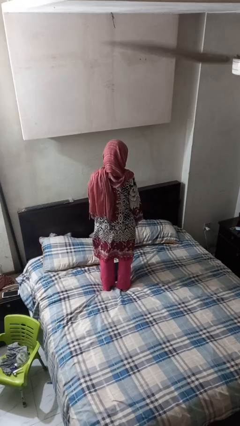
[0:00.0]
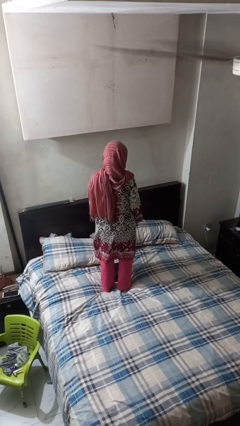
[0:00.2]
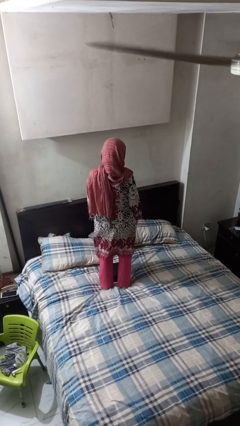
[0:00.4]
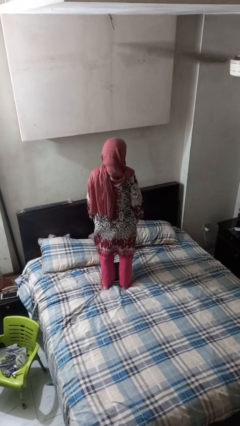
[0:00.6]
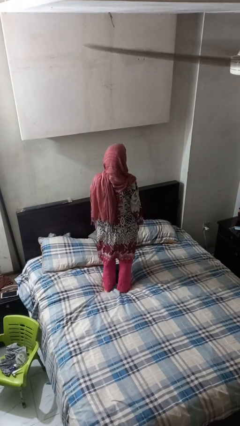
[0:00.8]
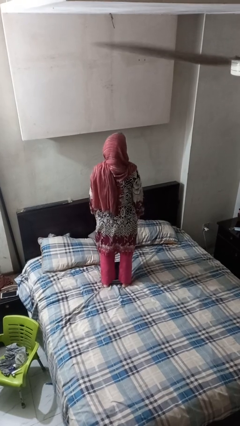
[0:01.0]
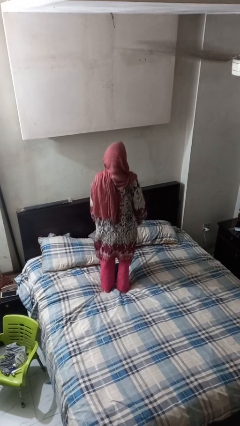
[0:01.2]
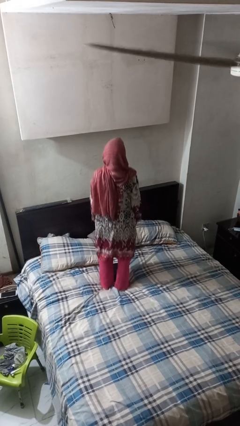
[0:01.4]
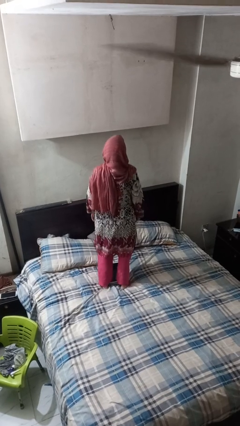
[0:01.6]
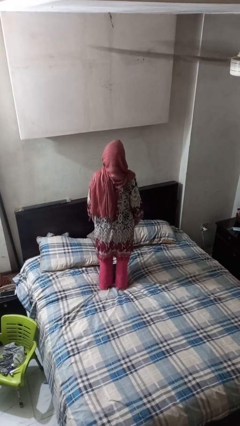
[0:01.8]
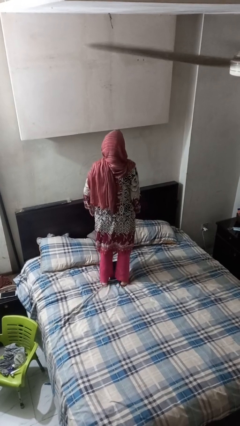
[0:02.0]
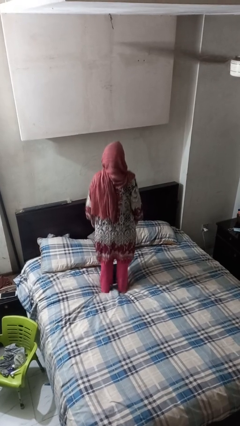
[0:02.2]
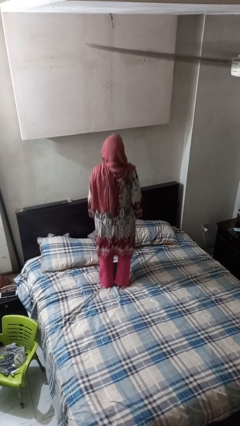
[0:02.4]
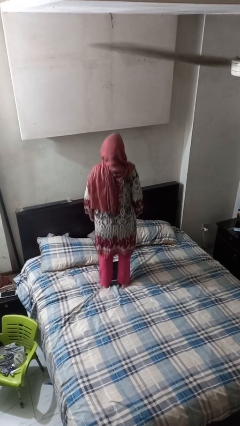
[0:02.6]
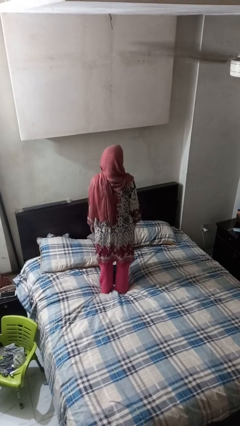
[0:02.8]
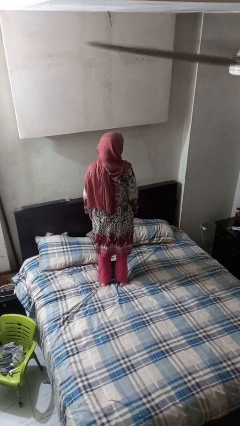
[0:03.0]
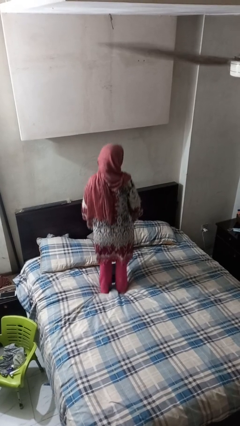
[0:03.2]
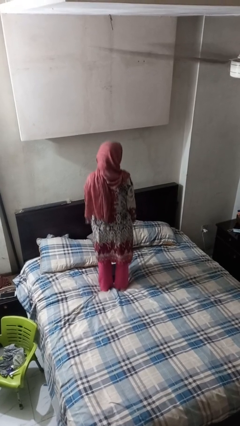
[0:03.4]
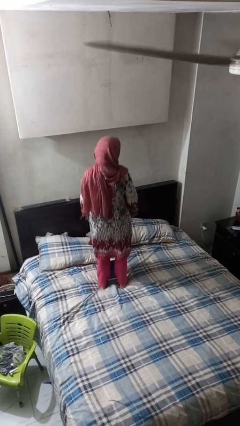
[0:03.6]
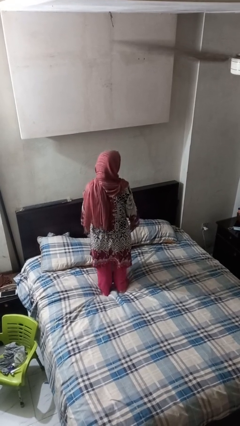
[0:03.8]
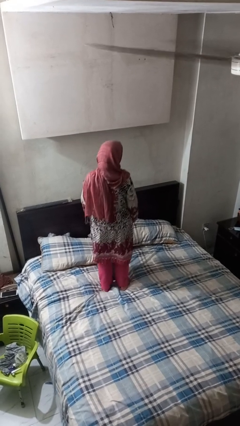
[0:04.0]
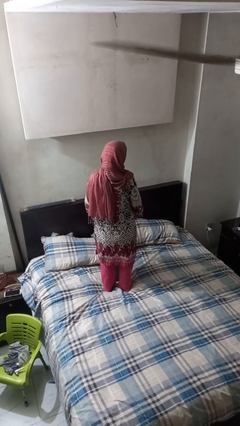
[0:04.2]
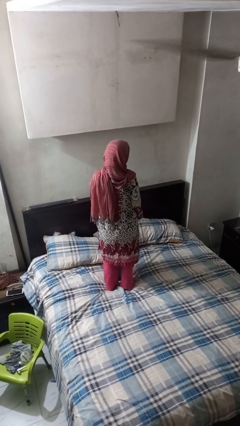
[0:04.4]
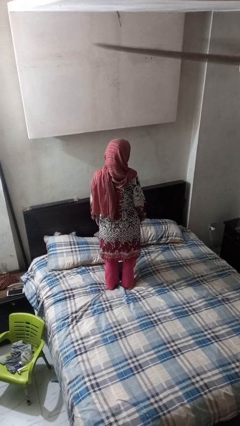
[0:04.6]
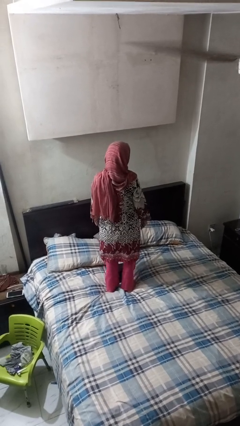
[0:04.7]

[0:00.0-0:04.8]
person jumps on bed

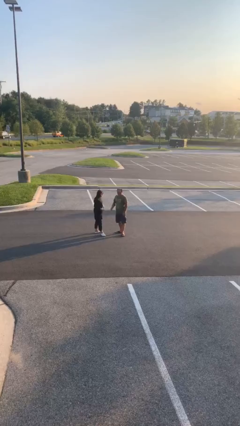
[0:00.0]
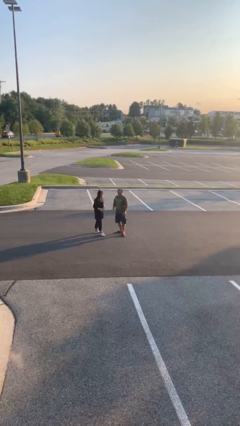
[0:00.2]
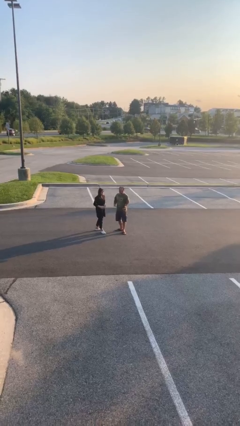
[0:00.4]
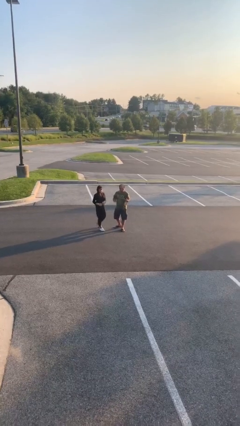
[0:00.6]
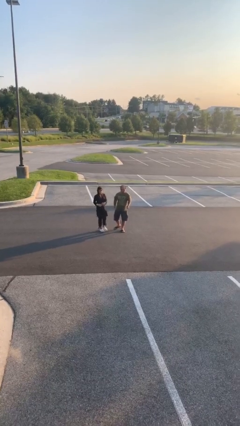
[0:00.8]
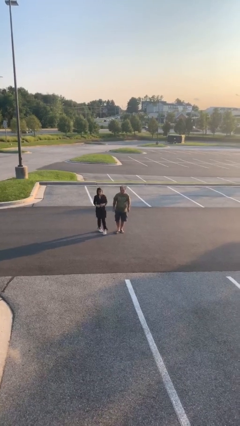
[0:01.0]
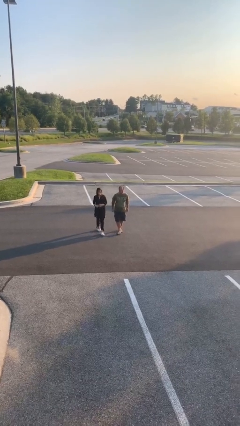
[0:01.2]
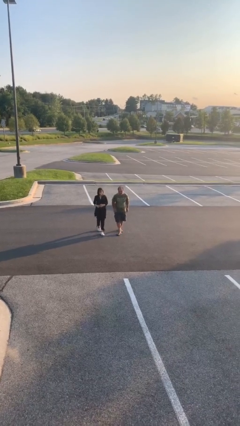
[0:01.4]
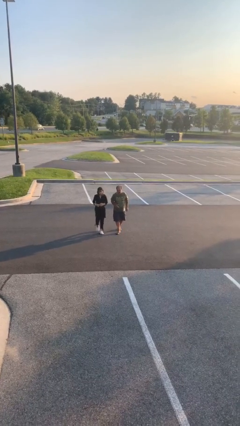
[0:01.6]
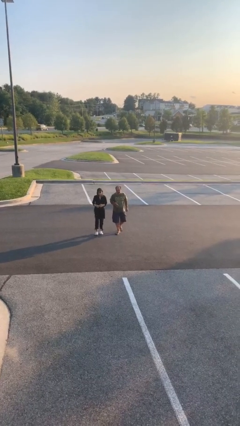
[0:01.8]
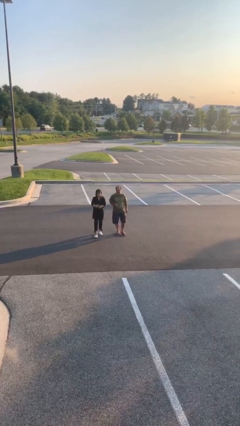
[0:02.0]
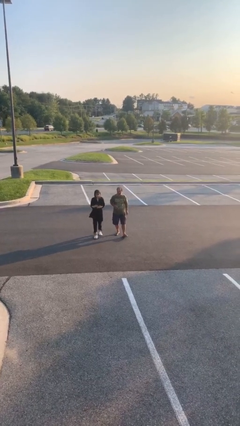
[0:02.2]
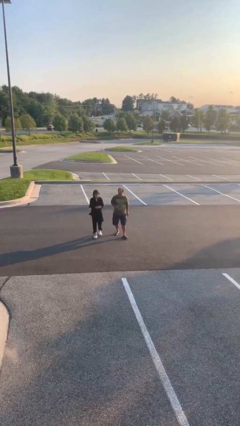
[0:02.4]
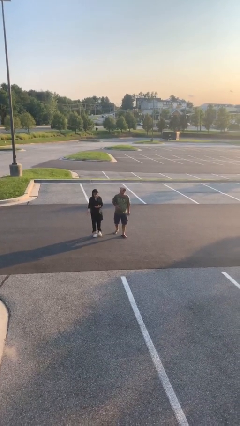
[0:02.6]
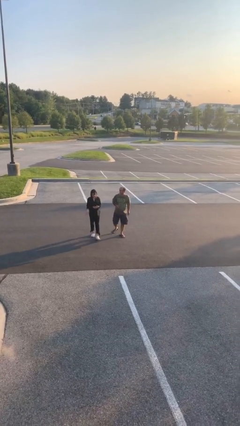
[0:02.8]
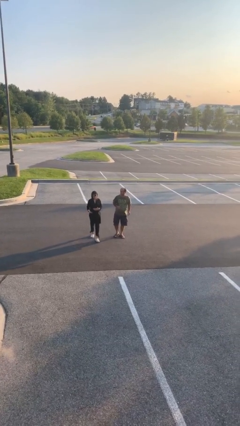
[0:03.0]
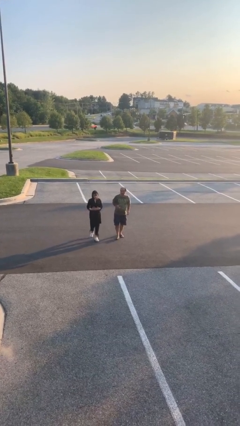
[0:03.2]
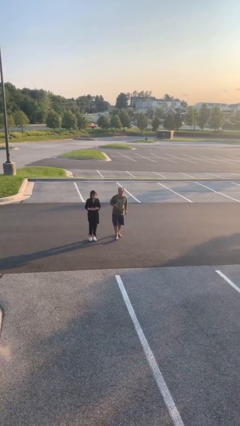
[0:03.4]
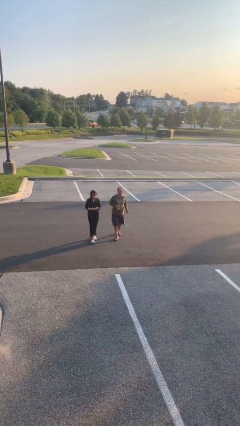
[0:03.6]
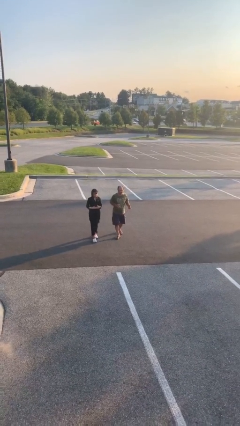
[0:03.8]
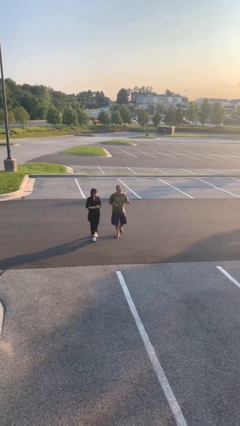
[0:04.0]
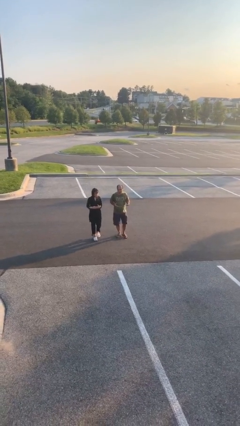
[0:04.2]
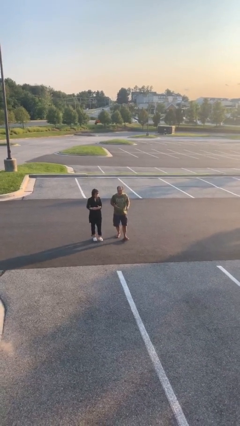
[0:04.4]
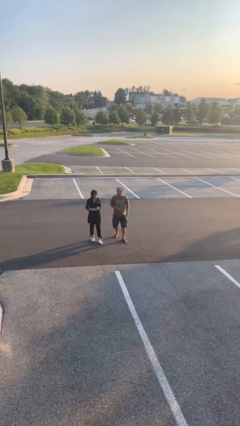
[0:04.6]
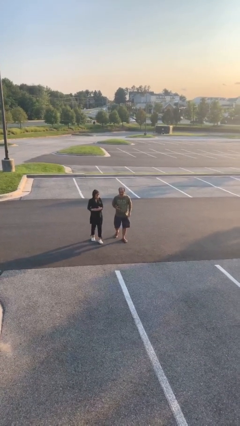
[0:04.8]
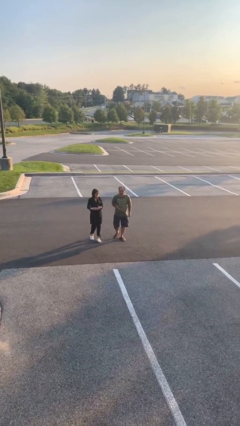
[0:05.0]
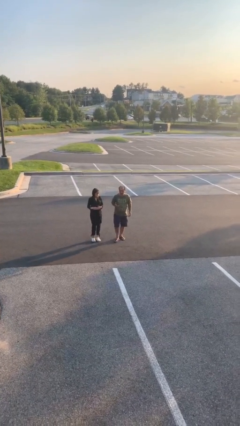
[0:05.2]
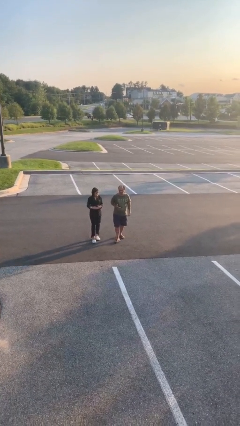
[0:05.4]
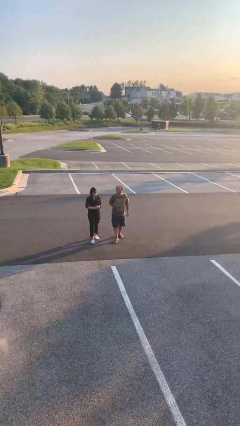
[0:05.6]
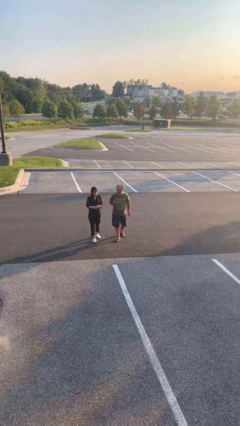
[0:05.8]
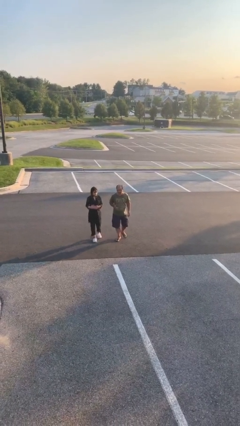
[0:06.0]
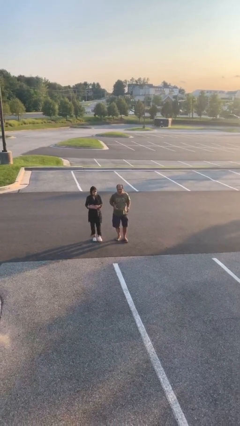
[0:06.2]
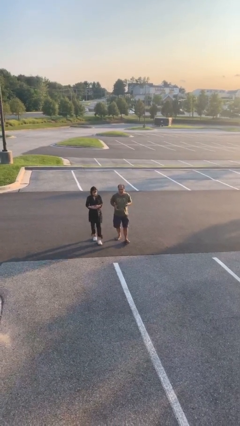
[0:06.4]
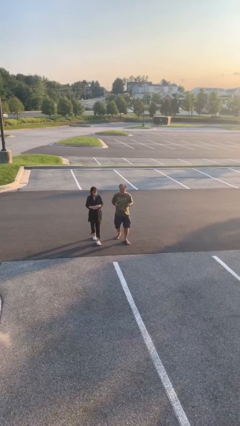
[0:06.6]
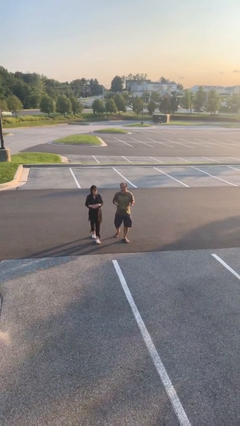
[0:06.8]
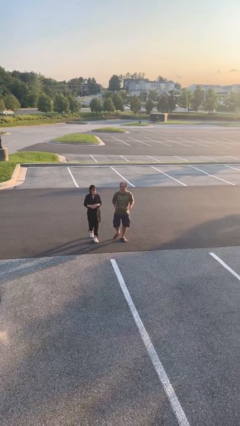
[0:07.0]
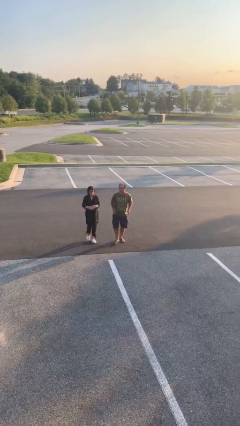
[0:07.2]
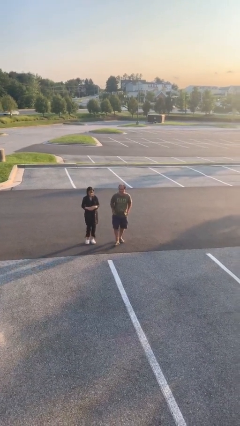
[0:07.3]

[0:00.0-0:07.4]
person talks to person

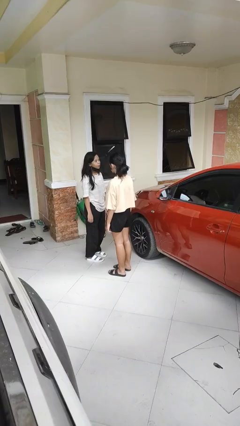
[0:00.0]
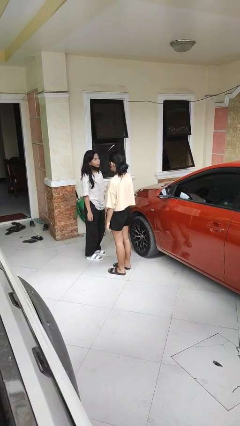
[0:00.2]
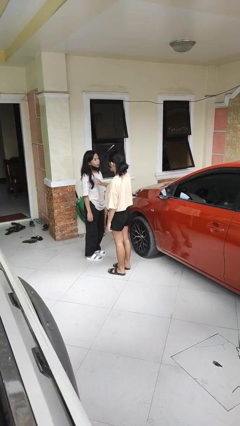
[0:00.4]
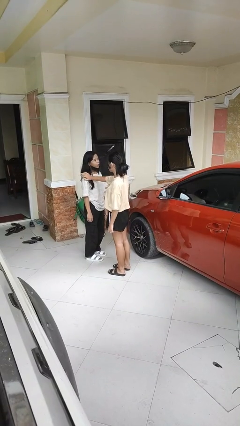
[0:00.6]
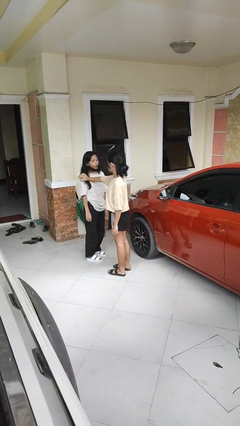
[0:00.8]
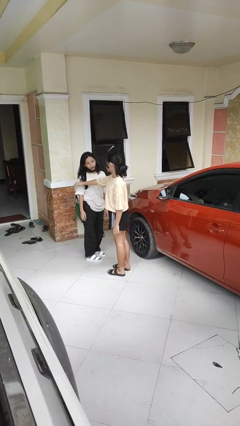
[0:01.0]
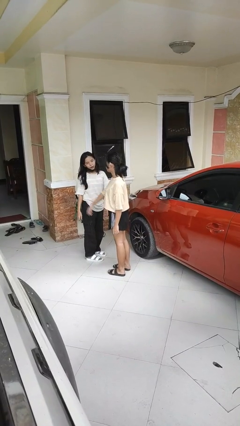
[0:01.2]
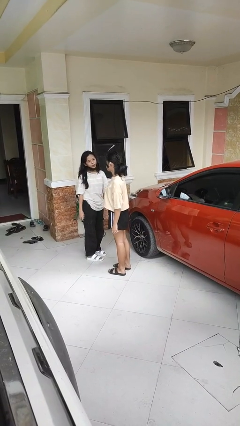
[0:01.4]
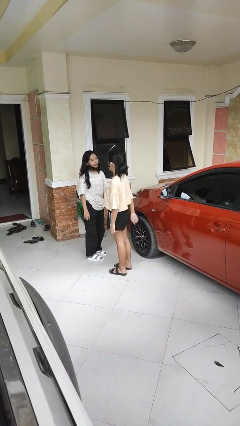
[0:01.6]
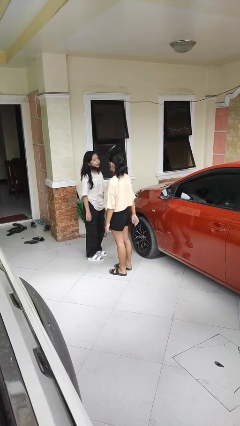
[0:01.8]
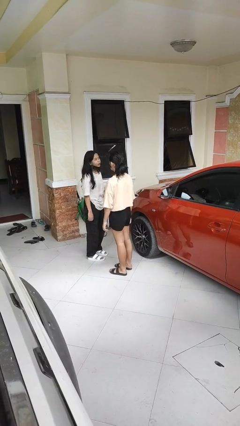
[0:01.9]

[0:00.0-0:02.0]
person shoves person

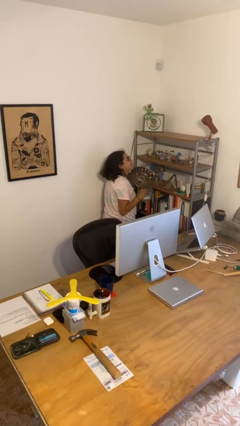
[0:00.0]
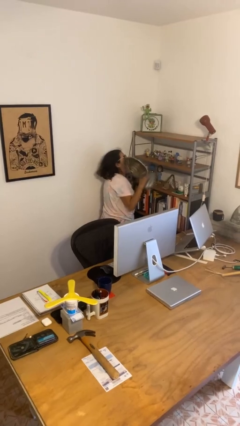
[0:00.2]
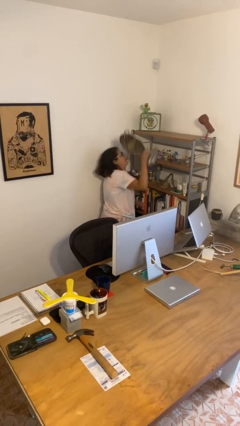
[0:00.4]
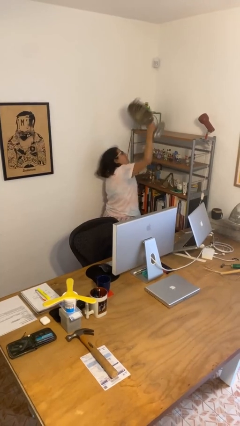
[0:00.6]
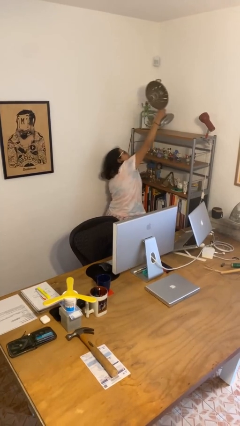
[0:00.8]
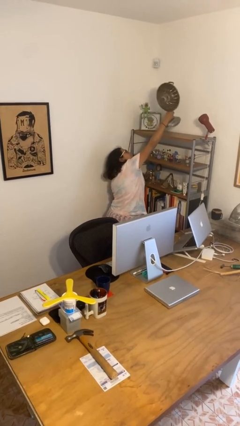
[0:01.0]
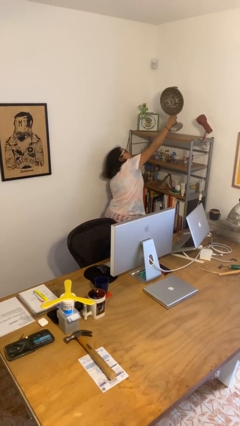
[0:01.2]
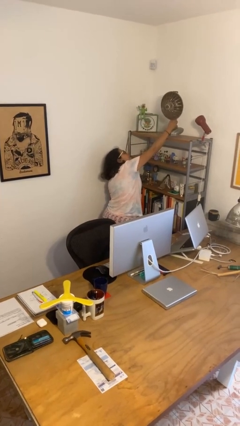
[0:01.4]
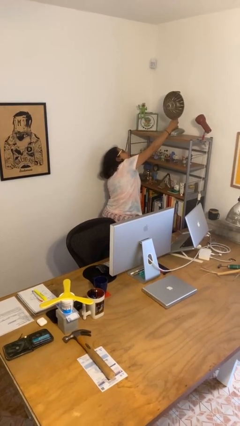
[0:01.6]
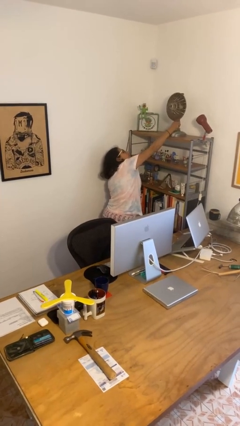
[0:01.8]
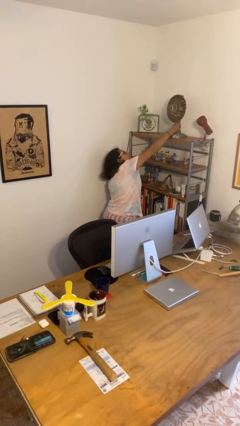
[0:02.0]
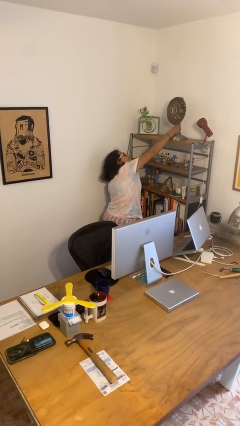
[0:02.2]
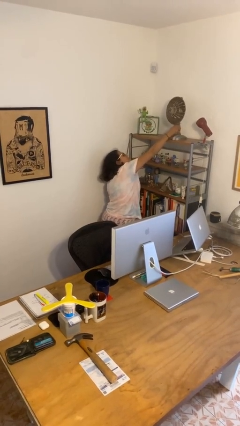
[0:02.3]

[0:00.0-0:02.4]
person puts down object on shelf

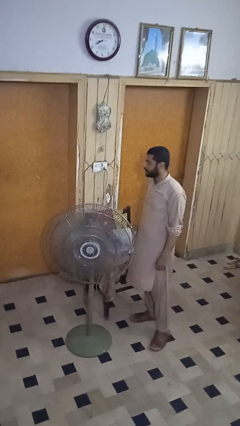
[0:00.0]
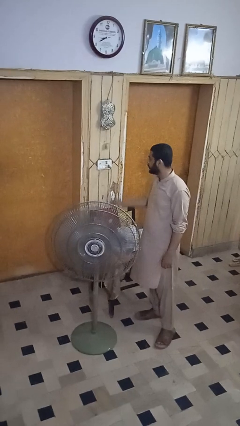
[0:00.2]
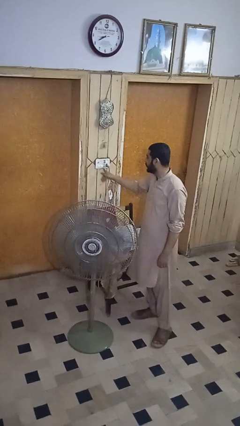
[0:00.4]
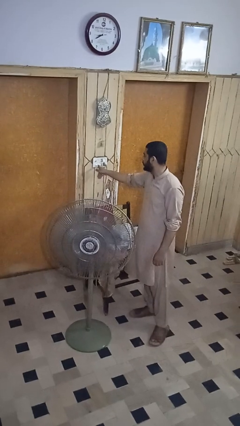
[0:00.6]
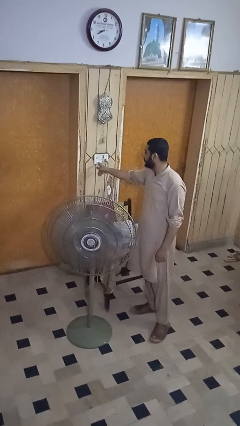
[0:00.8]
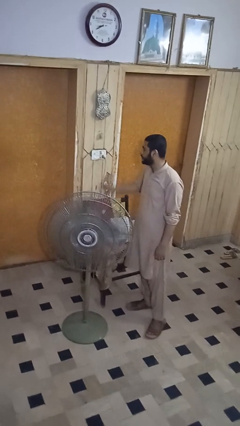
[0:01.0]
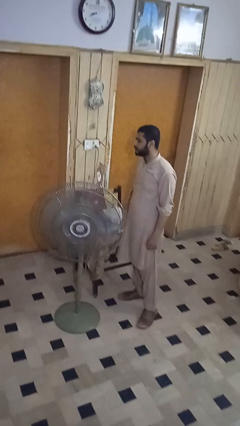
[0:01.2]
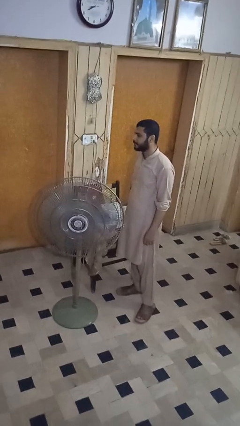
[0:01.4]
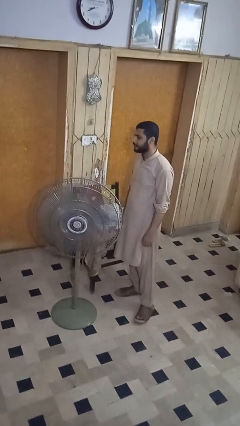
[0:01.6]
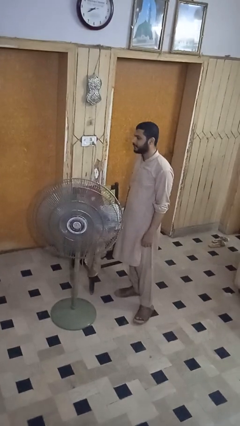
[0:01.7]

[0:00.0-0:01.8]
person turns on fan
